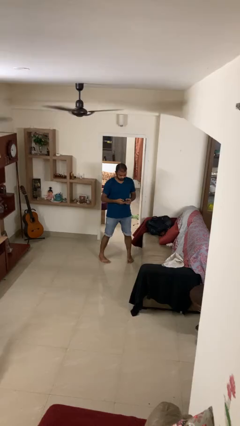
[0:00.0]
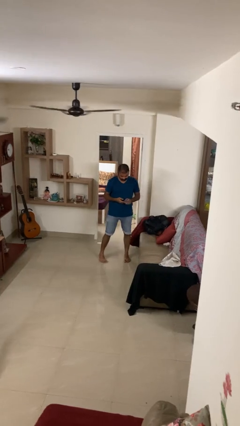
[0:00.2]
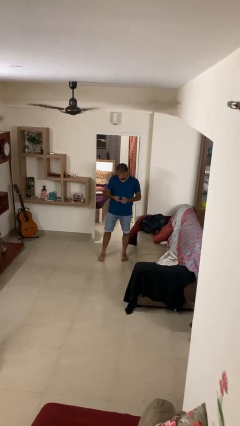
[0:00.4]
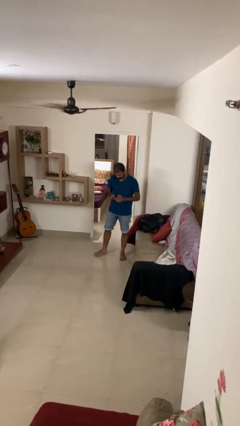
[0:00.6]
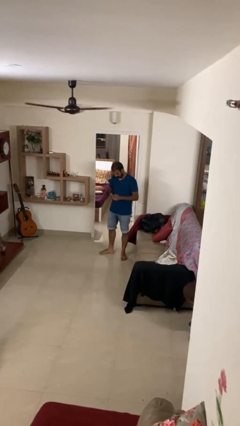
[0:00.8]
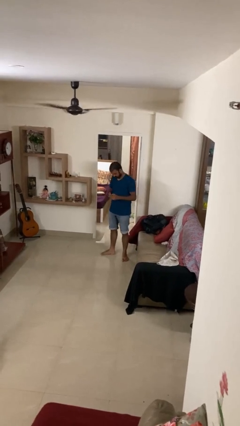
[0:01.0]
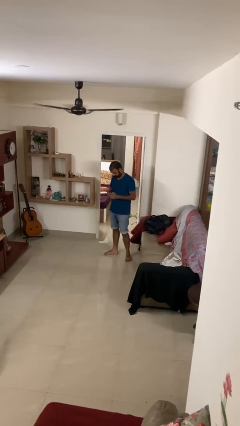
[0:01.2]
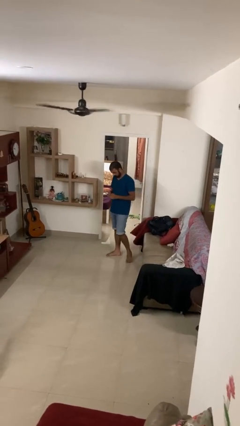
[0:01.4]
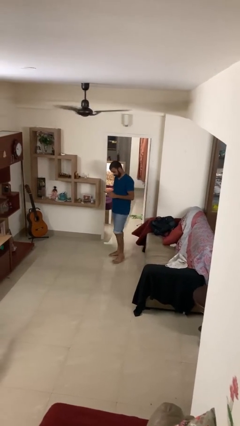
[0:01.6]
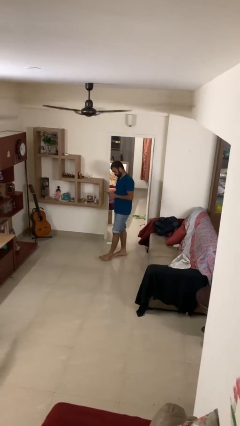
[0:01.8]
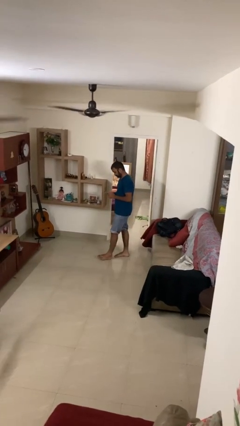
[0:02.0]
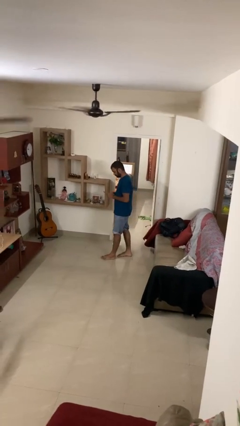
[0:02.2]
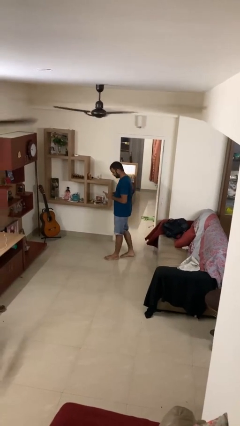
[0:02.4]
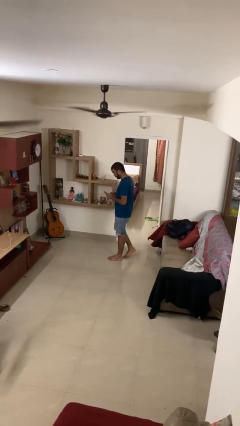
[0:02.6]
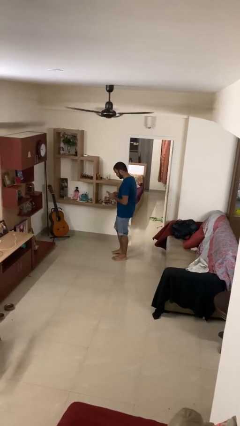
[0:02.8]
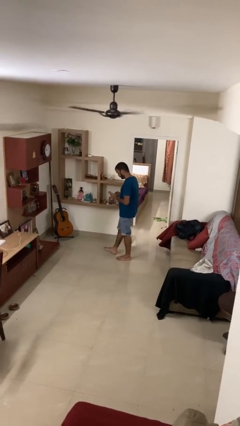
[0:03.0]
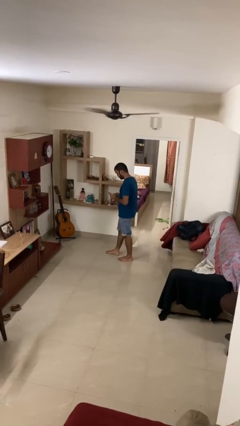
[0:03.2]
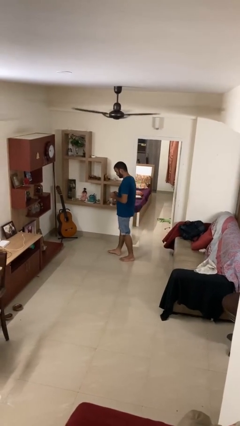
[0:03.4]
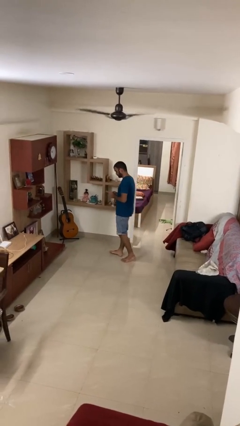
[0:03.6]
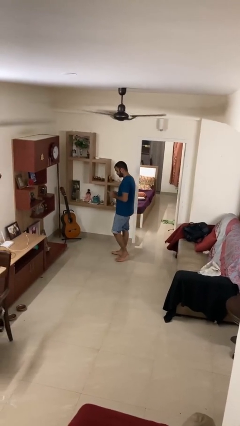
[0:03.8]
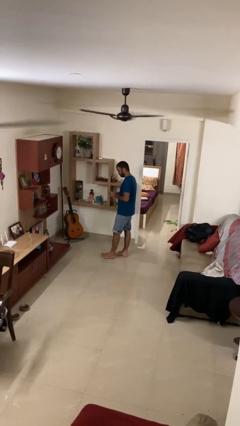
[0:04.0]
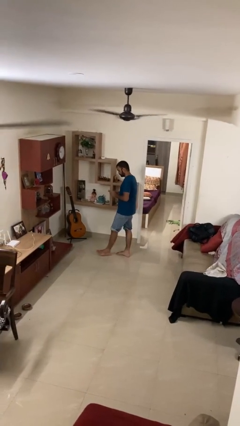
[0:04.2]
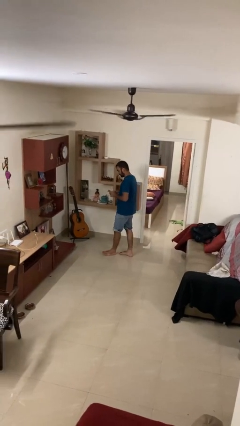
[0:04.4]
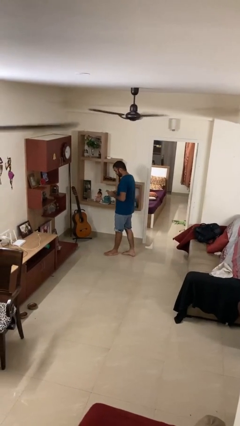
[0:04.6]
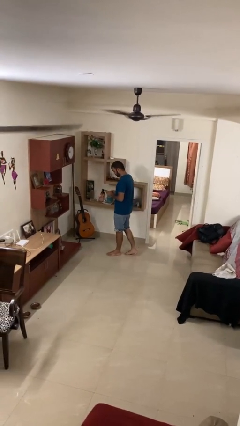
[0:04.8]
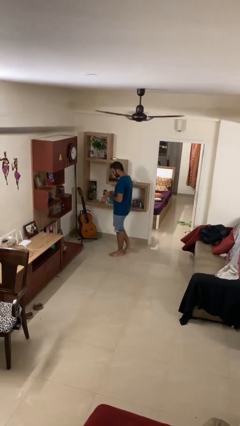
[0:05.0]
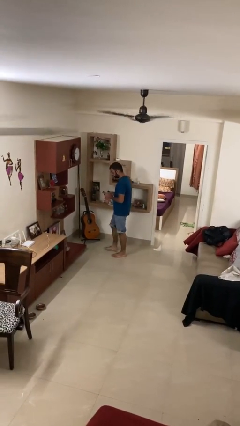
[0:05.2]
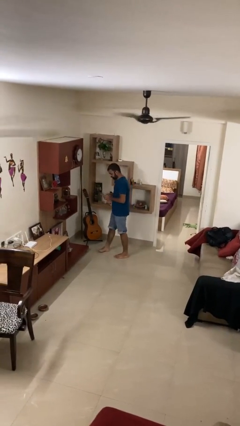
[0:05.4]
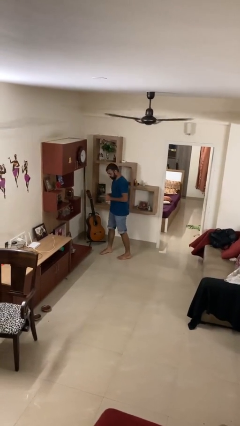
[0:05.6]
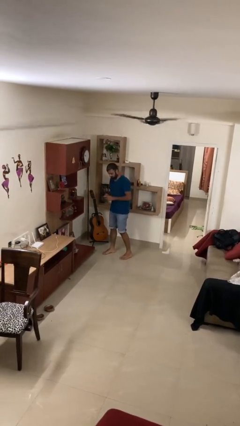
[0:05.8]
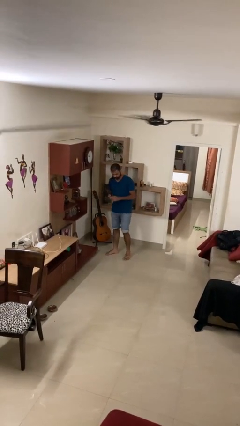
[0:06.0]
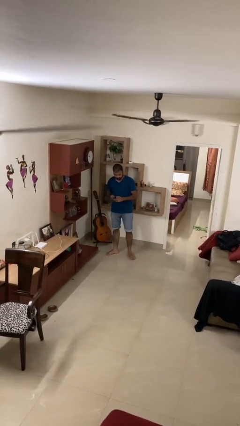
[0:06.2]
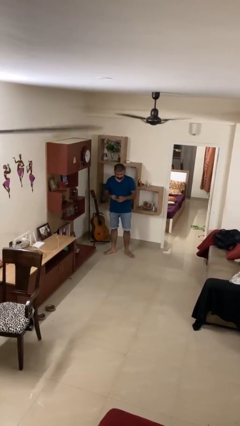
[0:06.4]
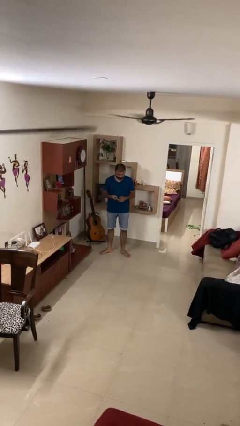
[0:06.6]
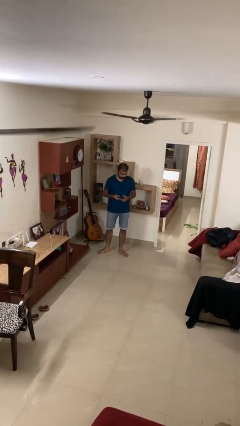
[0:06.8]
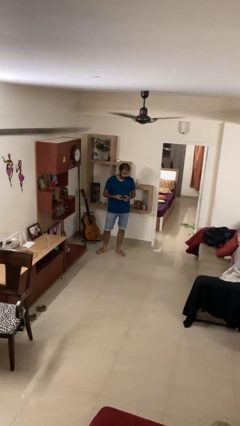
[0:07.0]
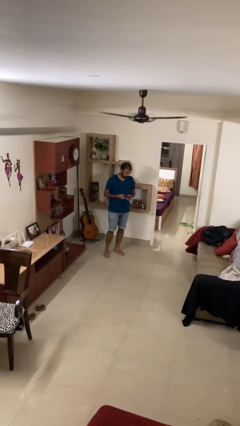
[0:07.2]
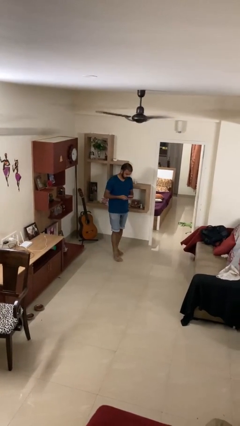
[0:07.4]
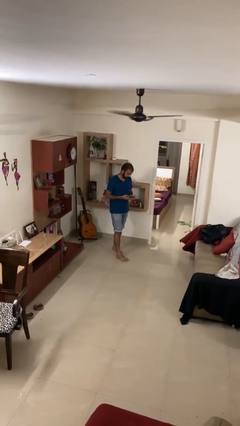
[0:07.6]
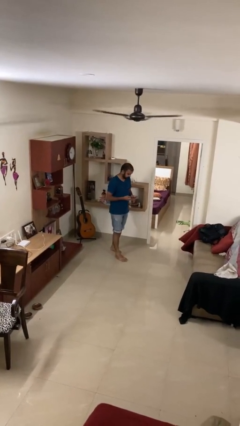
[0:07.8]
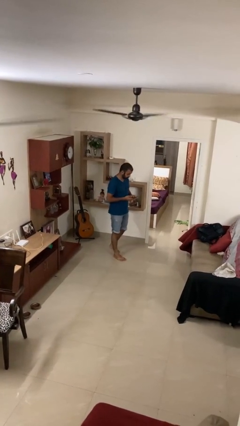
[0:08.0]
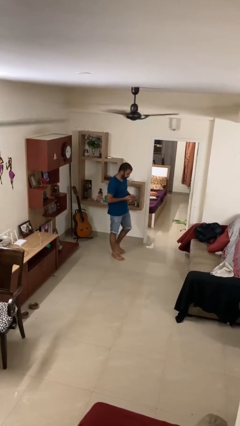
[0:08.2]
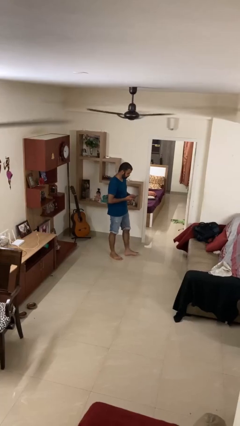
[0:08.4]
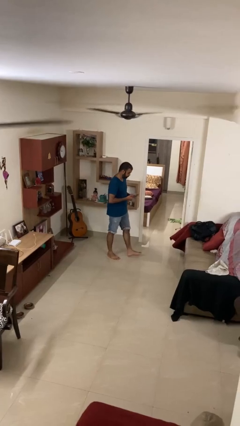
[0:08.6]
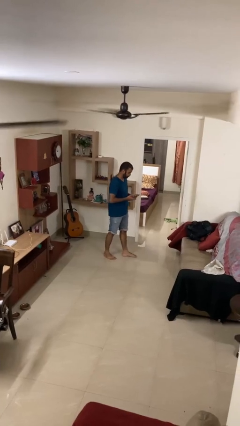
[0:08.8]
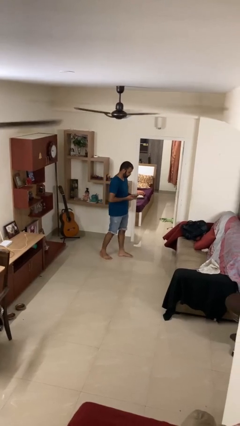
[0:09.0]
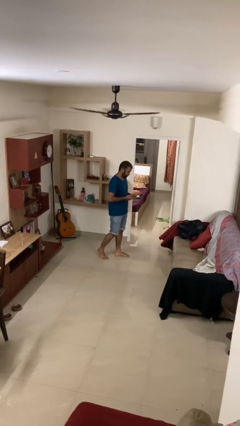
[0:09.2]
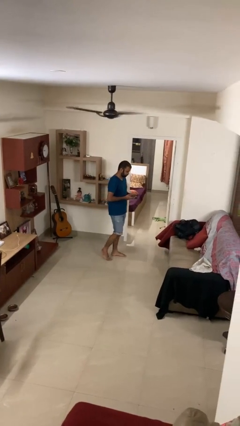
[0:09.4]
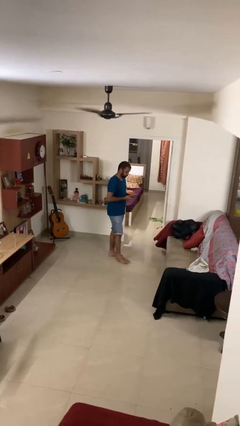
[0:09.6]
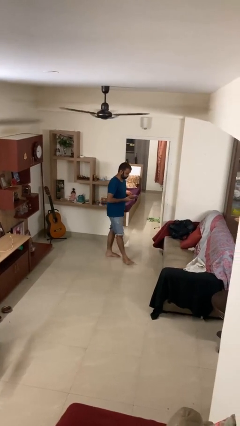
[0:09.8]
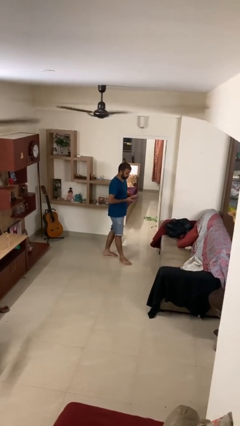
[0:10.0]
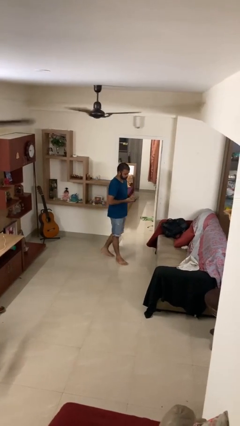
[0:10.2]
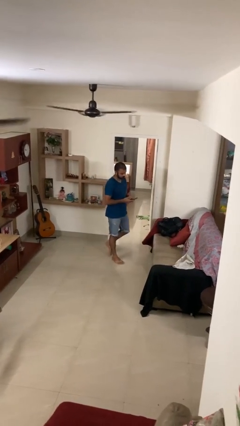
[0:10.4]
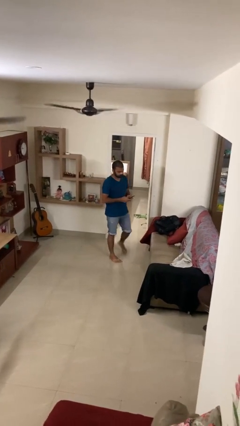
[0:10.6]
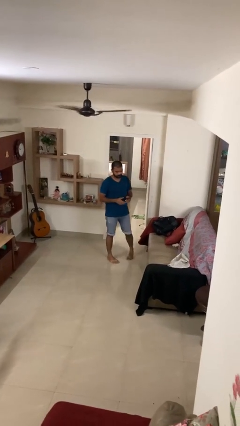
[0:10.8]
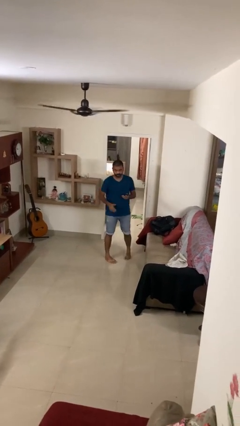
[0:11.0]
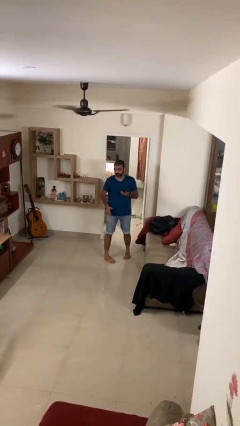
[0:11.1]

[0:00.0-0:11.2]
person texts on phone

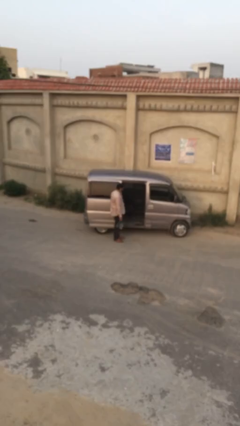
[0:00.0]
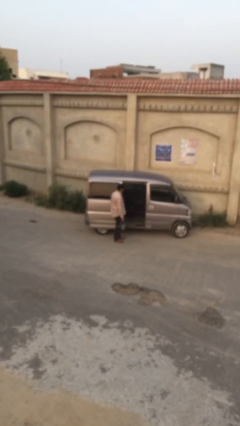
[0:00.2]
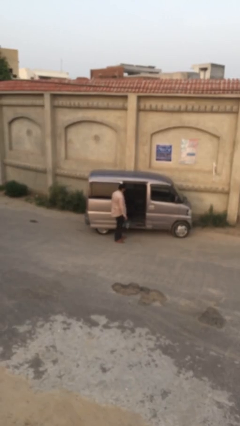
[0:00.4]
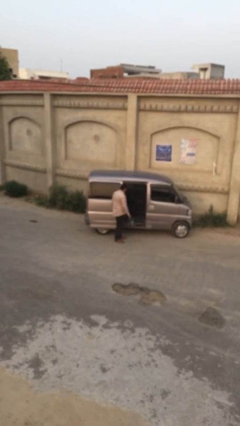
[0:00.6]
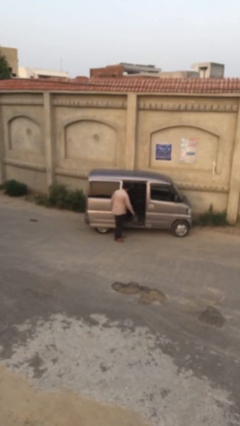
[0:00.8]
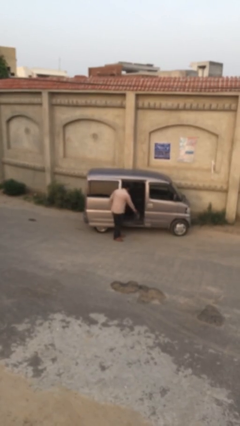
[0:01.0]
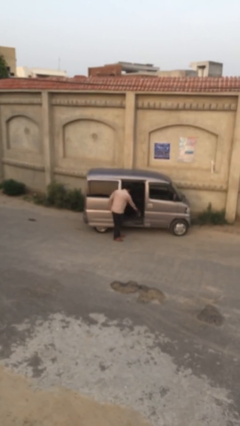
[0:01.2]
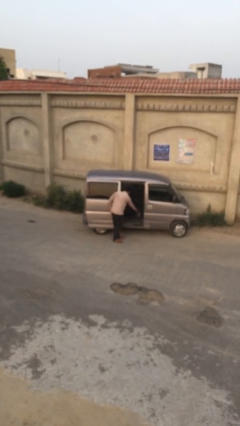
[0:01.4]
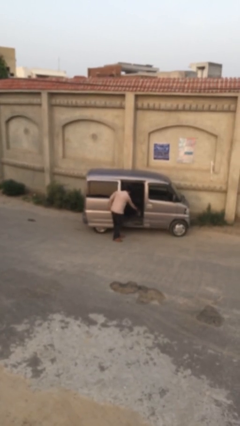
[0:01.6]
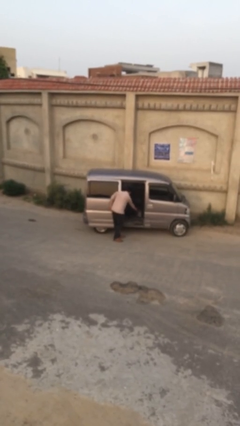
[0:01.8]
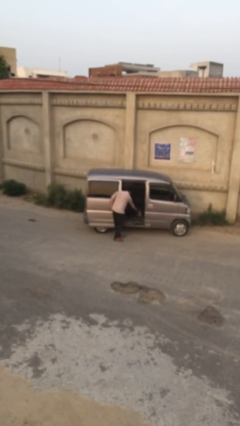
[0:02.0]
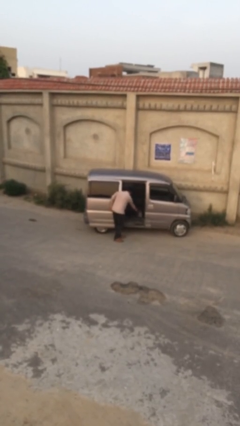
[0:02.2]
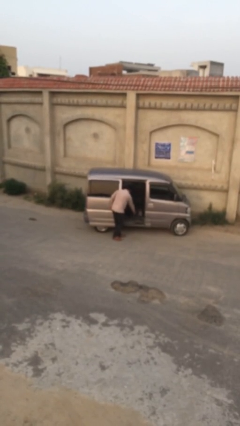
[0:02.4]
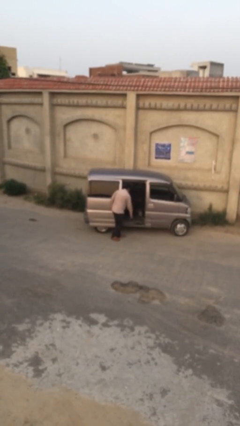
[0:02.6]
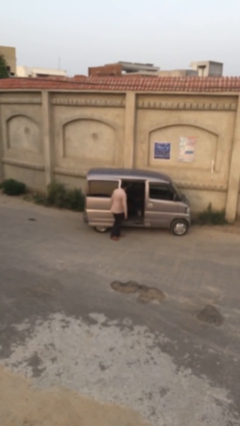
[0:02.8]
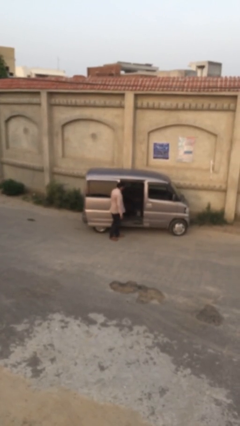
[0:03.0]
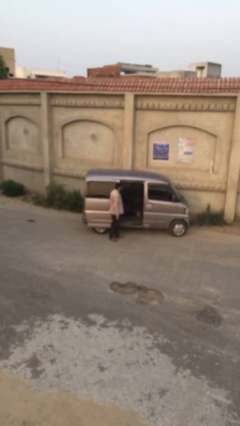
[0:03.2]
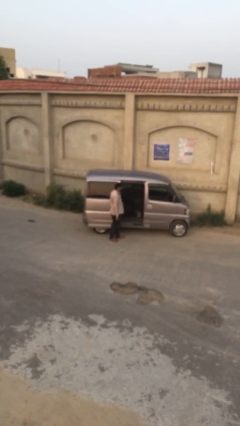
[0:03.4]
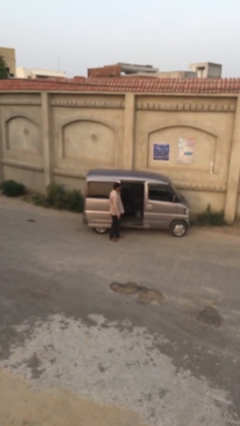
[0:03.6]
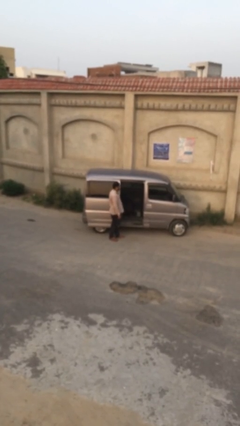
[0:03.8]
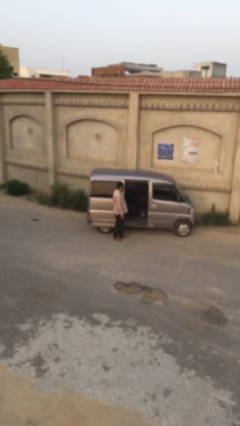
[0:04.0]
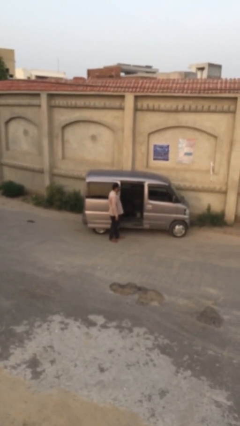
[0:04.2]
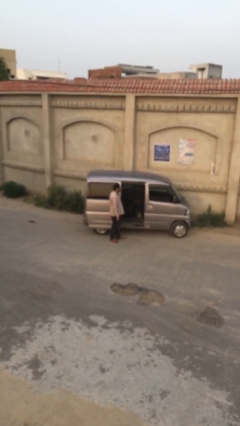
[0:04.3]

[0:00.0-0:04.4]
person loads car

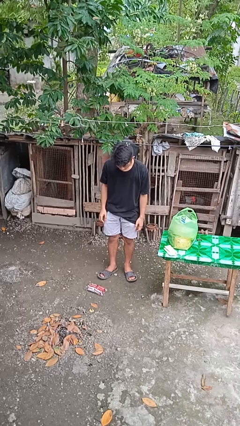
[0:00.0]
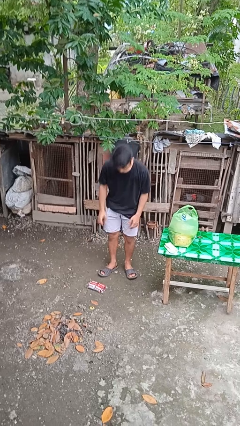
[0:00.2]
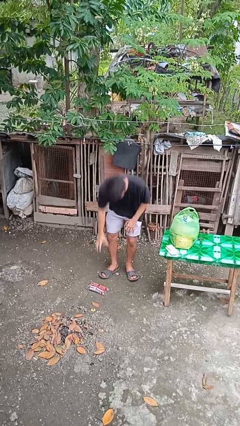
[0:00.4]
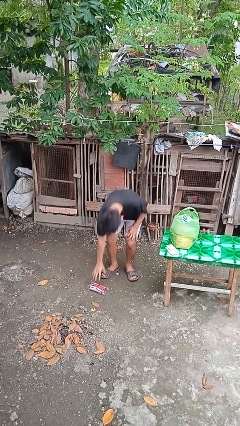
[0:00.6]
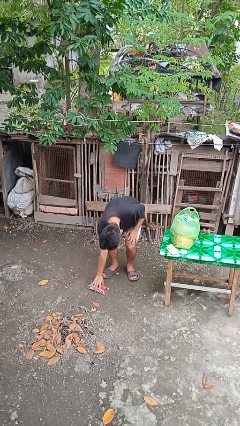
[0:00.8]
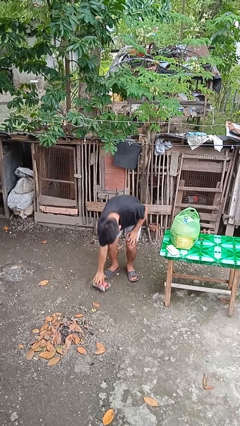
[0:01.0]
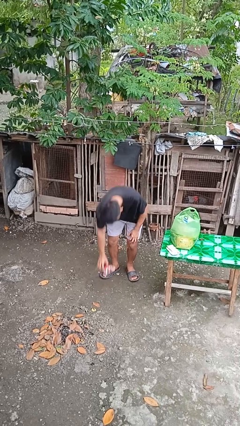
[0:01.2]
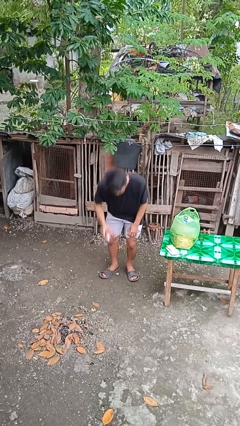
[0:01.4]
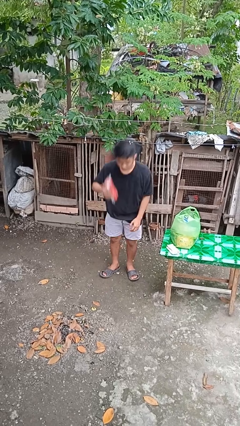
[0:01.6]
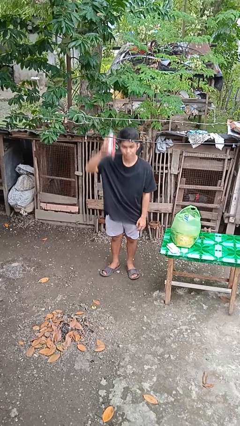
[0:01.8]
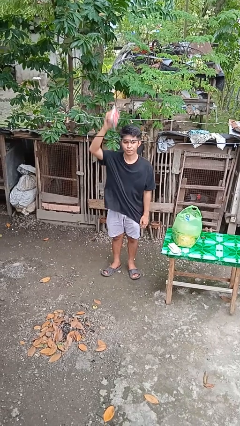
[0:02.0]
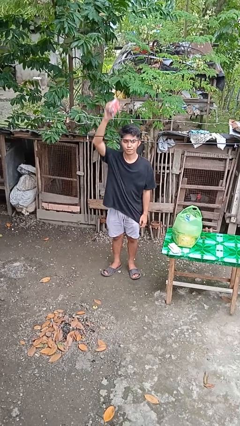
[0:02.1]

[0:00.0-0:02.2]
person picks up object from floor
